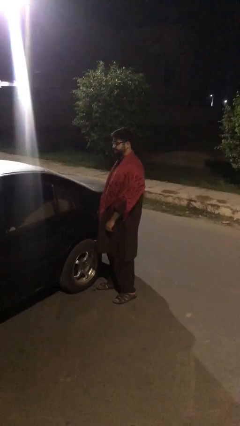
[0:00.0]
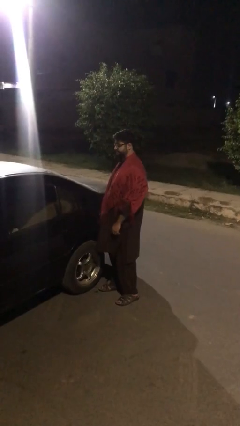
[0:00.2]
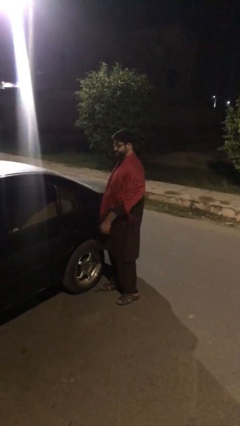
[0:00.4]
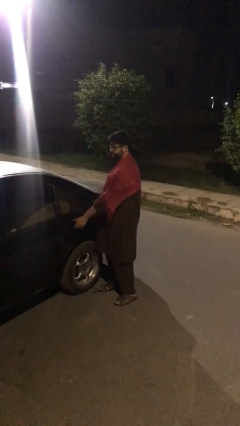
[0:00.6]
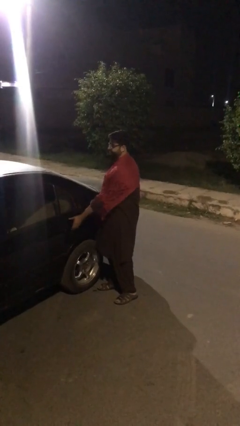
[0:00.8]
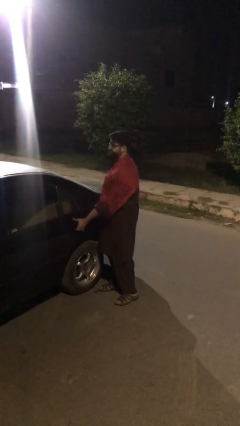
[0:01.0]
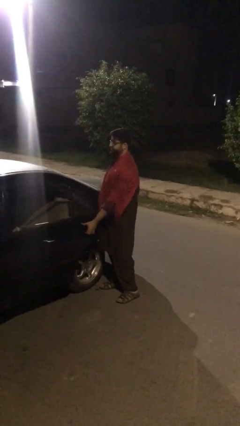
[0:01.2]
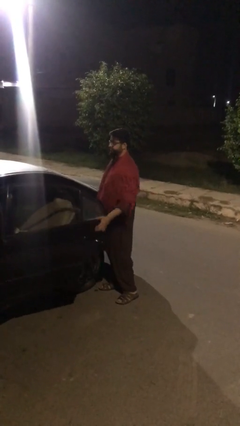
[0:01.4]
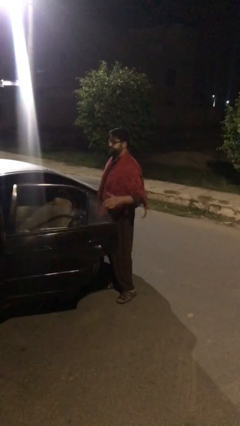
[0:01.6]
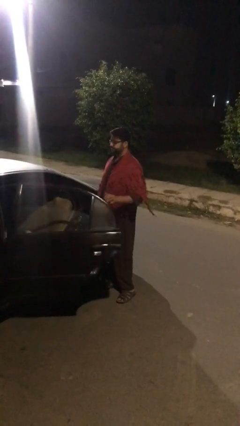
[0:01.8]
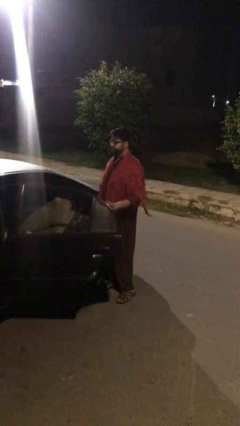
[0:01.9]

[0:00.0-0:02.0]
person opens car door

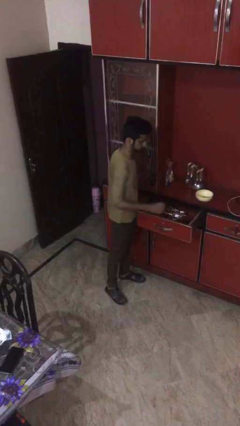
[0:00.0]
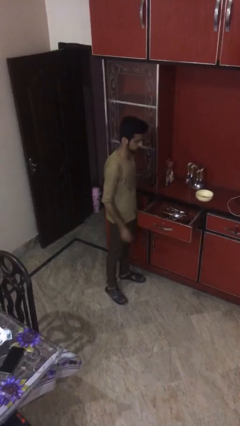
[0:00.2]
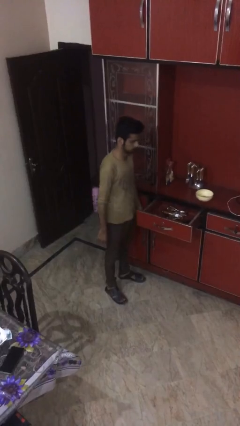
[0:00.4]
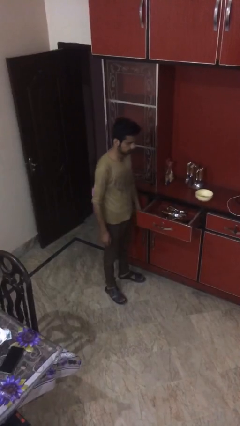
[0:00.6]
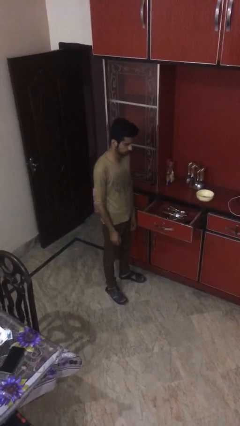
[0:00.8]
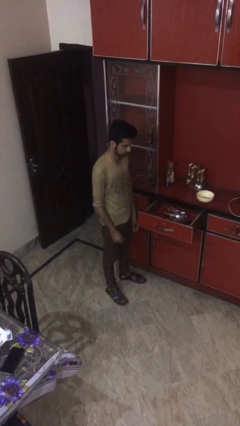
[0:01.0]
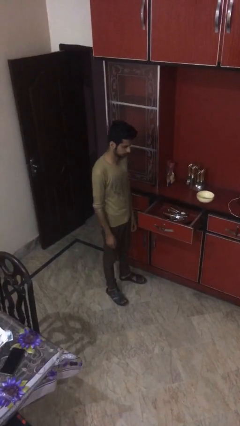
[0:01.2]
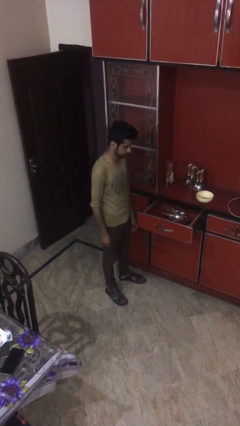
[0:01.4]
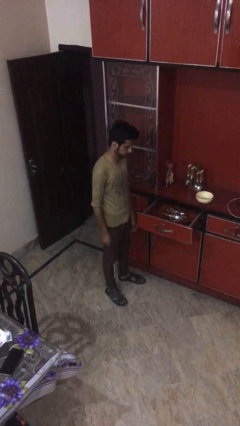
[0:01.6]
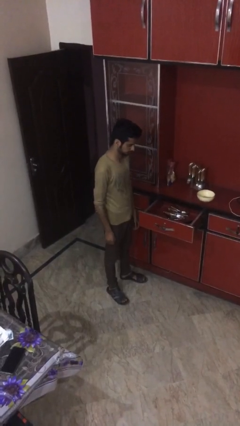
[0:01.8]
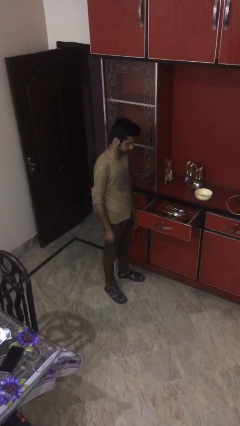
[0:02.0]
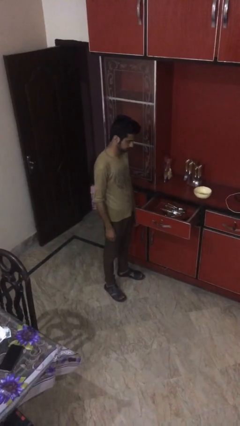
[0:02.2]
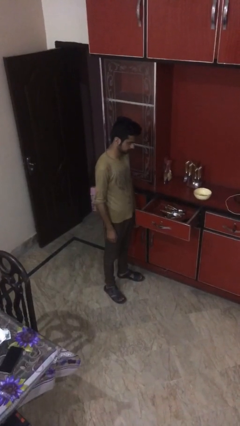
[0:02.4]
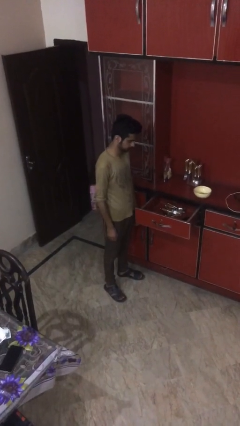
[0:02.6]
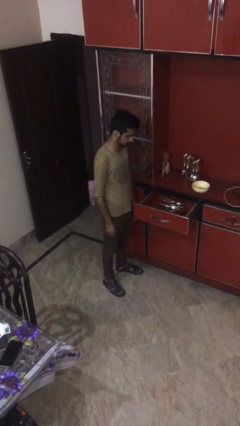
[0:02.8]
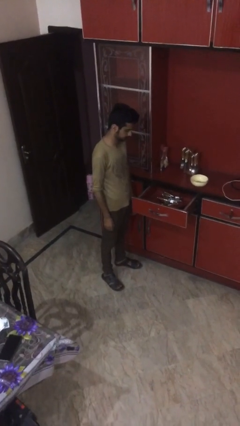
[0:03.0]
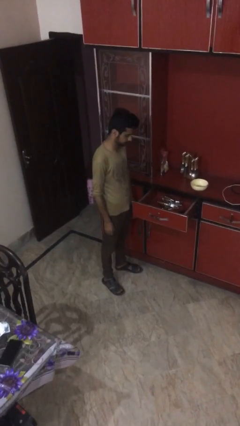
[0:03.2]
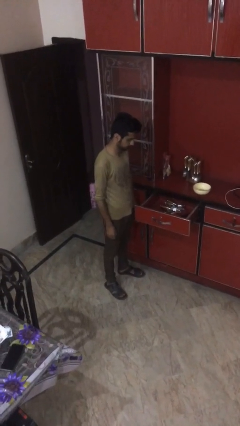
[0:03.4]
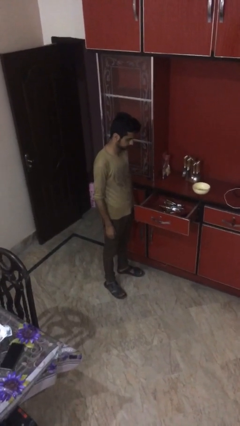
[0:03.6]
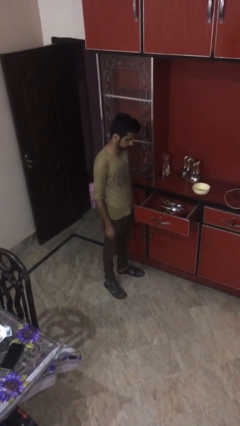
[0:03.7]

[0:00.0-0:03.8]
person puts object into kitchen drawer

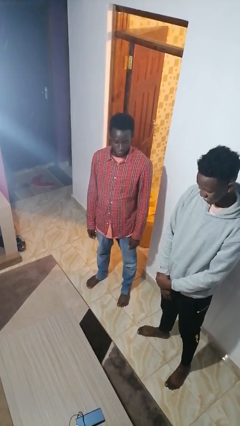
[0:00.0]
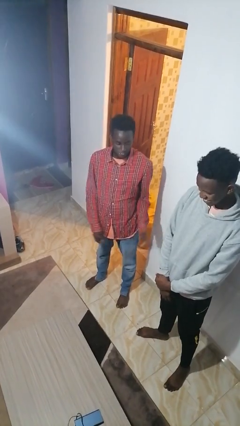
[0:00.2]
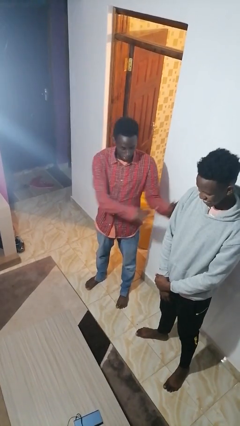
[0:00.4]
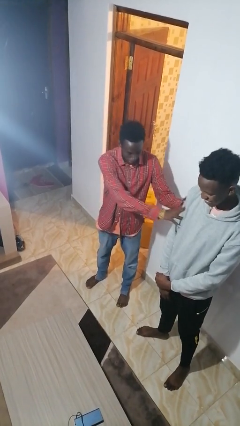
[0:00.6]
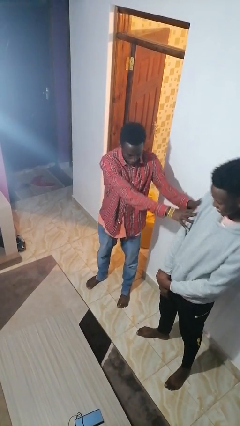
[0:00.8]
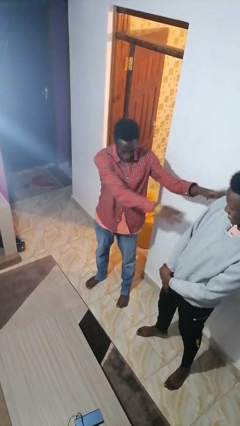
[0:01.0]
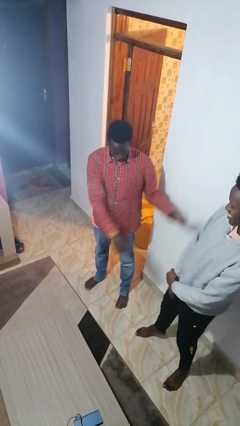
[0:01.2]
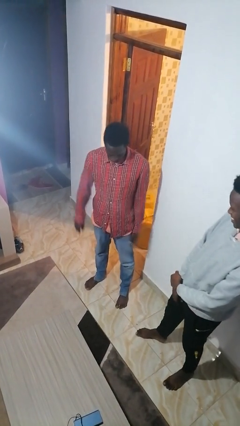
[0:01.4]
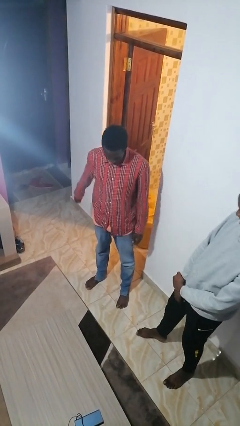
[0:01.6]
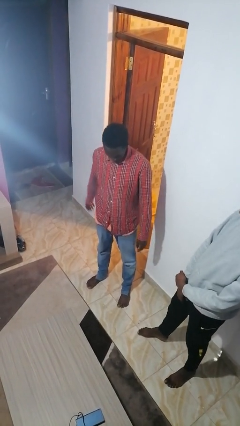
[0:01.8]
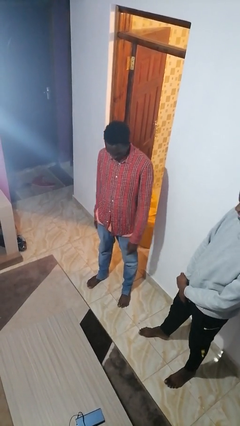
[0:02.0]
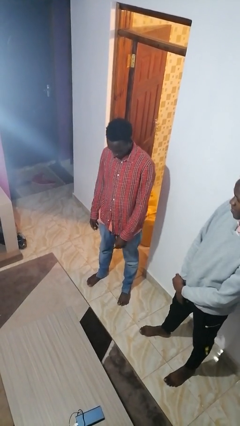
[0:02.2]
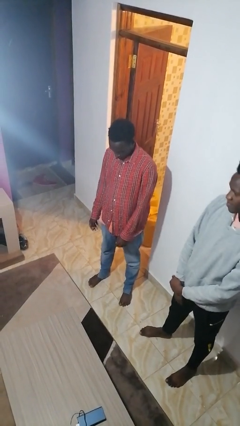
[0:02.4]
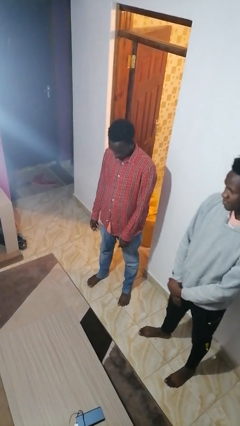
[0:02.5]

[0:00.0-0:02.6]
person shoves person

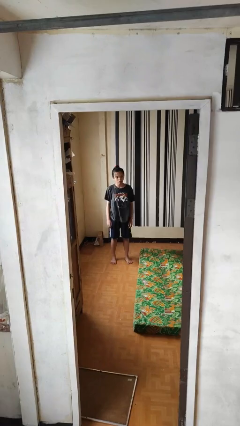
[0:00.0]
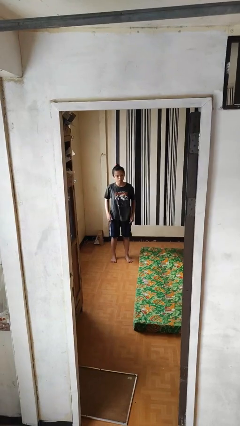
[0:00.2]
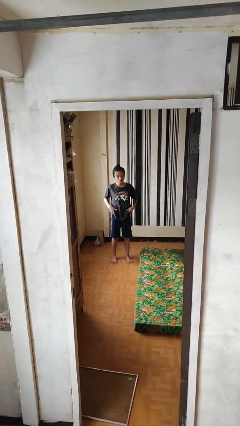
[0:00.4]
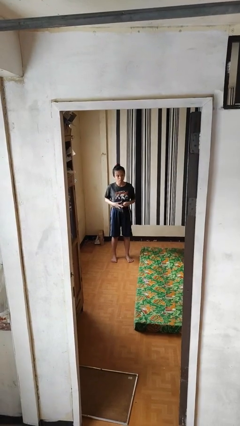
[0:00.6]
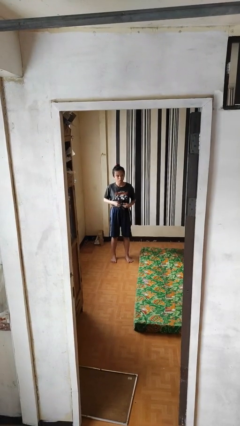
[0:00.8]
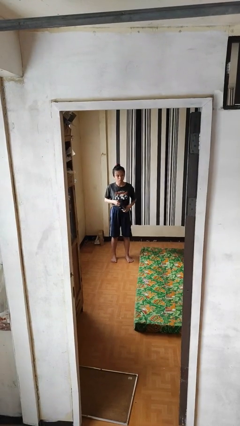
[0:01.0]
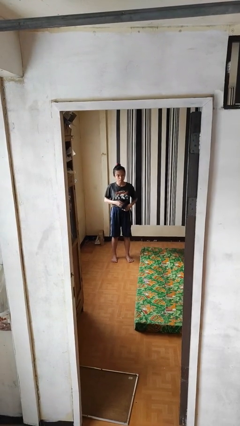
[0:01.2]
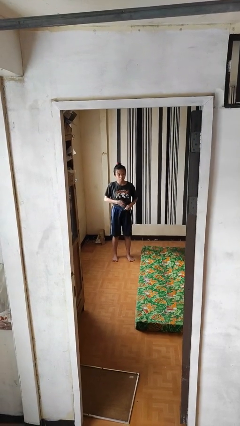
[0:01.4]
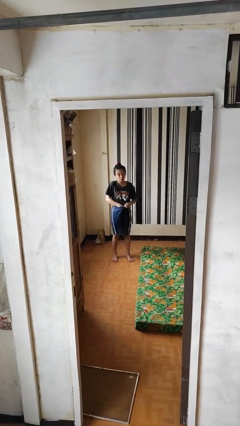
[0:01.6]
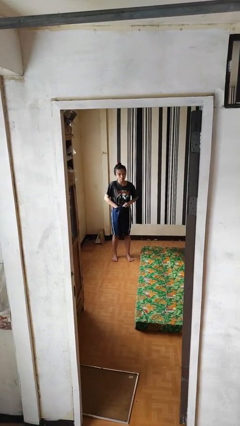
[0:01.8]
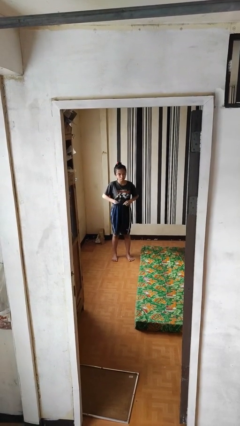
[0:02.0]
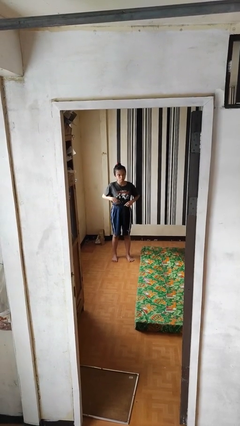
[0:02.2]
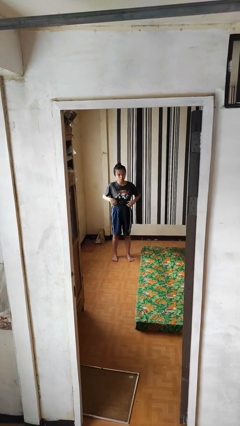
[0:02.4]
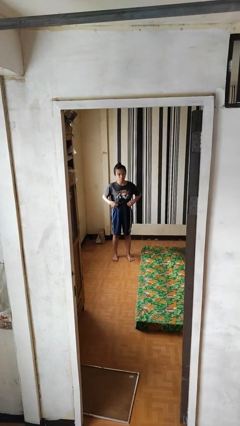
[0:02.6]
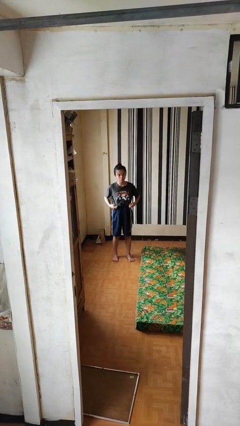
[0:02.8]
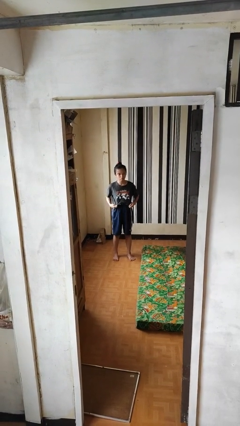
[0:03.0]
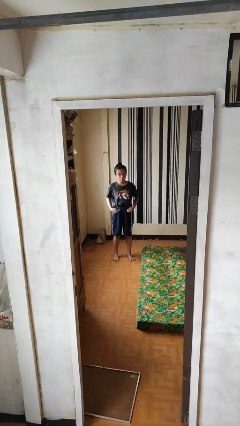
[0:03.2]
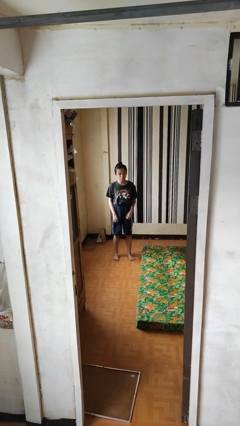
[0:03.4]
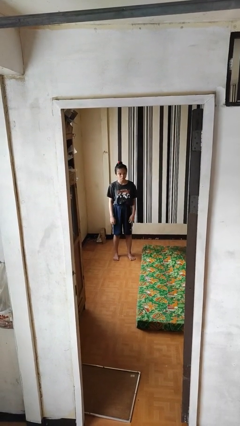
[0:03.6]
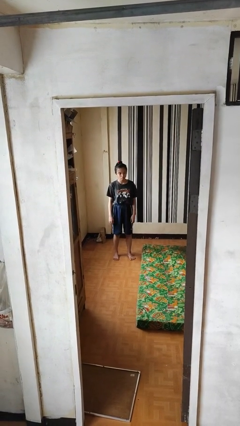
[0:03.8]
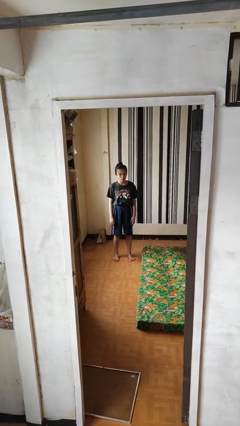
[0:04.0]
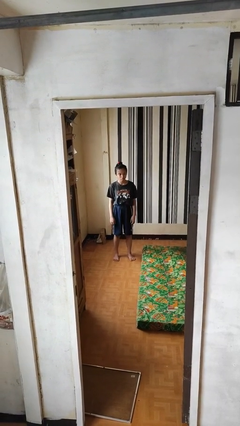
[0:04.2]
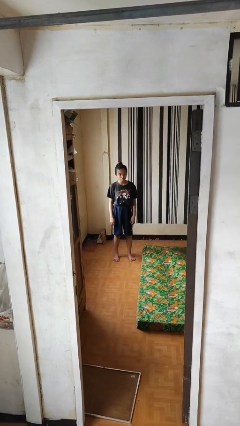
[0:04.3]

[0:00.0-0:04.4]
person tucks in shirt

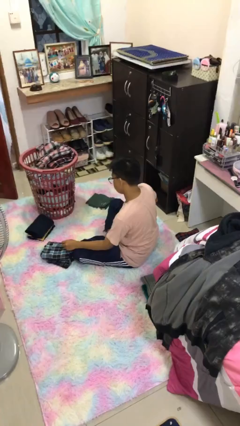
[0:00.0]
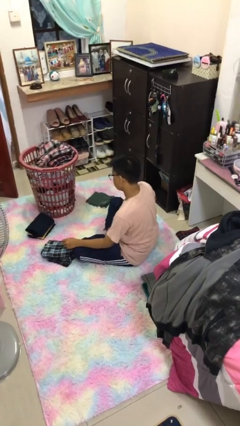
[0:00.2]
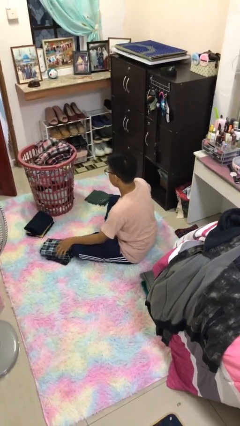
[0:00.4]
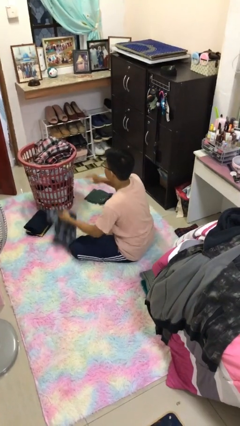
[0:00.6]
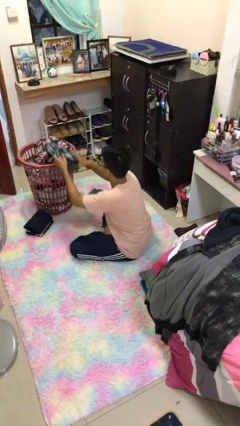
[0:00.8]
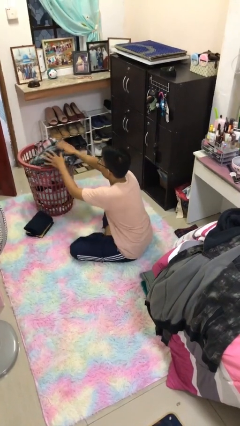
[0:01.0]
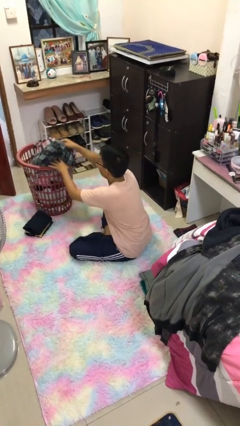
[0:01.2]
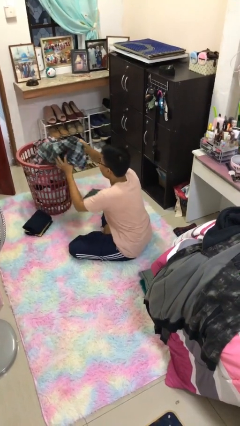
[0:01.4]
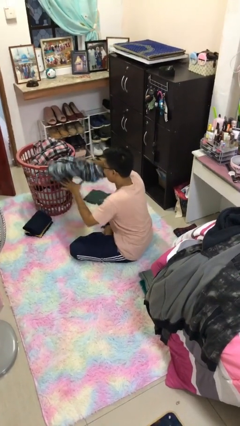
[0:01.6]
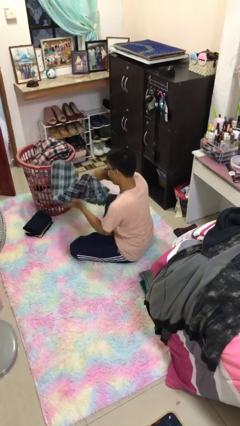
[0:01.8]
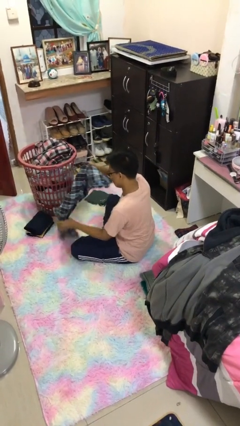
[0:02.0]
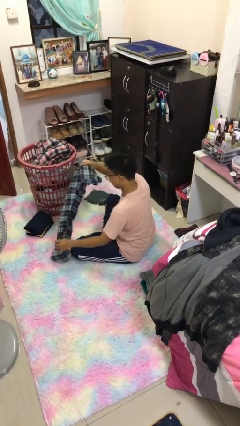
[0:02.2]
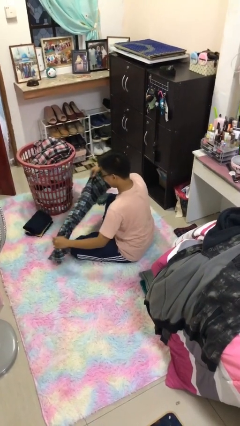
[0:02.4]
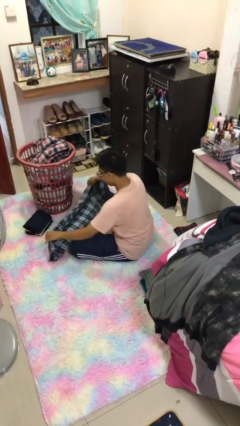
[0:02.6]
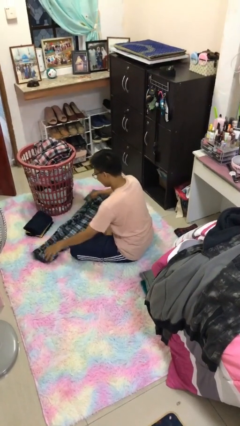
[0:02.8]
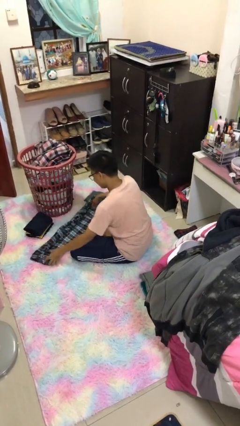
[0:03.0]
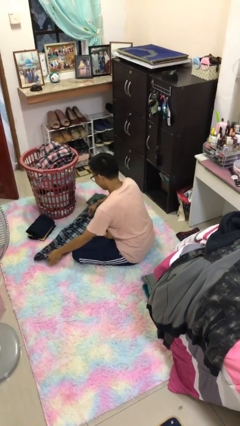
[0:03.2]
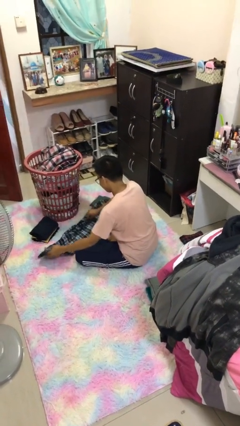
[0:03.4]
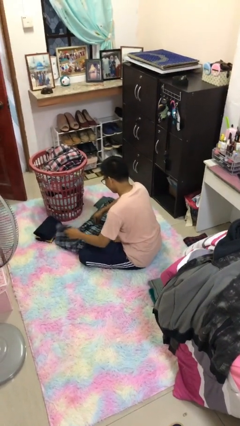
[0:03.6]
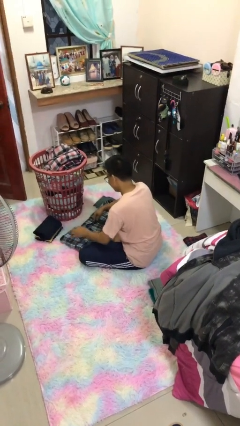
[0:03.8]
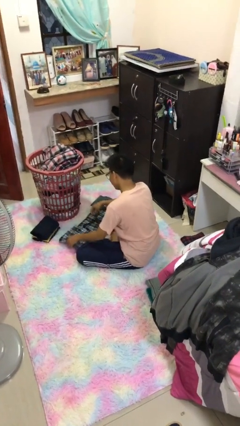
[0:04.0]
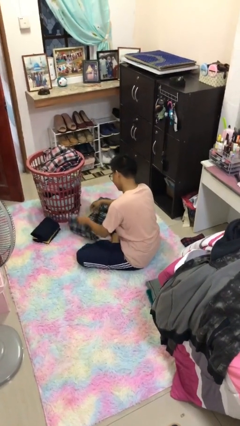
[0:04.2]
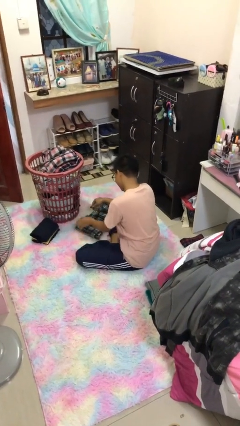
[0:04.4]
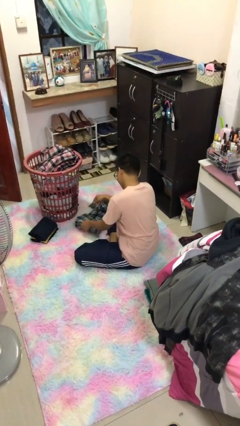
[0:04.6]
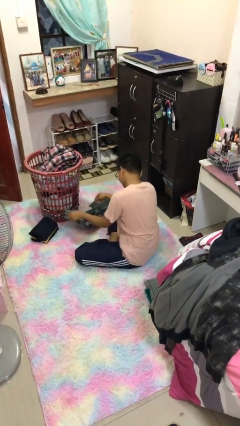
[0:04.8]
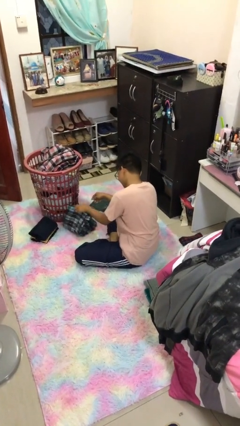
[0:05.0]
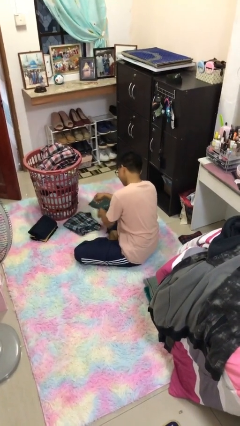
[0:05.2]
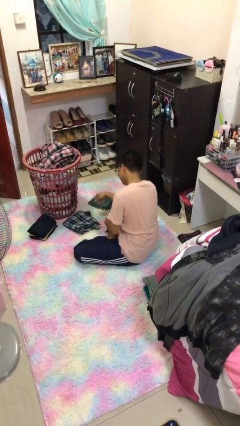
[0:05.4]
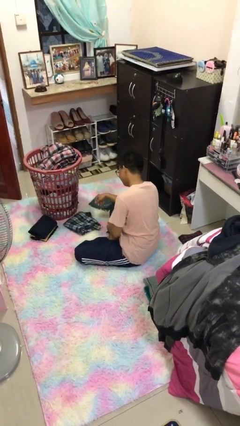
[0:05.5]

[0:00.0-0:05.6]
person folds pants
